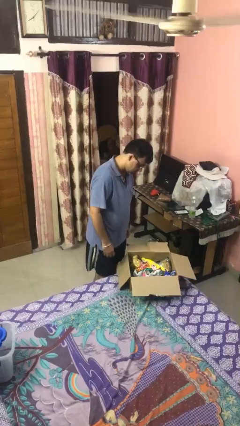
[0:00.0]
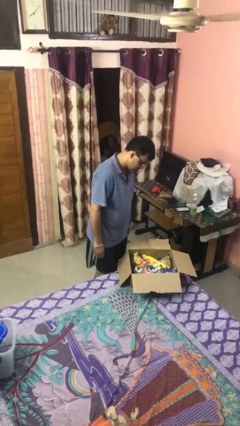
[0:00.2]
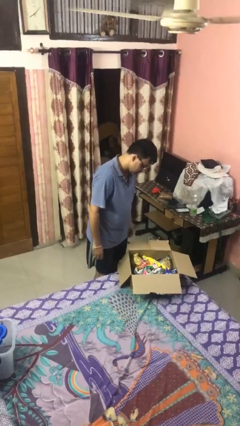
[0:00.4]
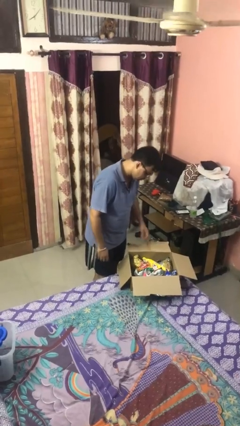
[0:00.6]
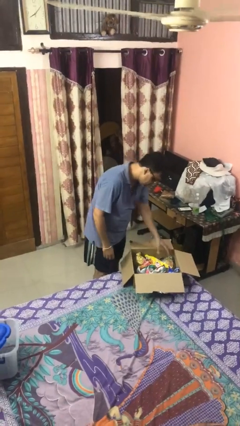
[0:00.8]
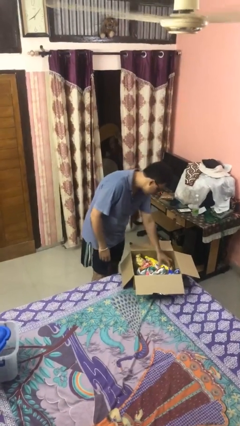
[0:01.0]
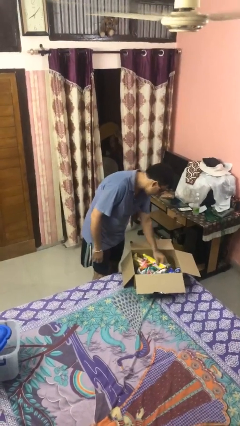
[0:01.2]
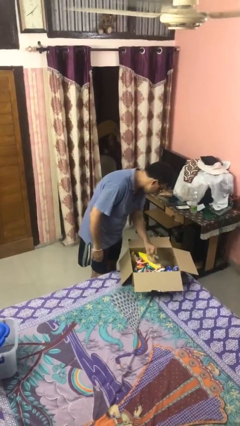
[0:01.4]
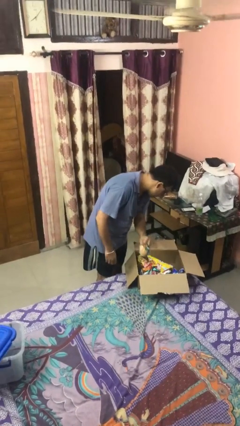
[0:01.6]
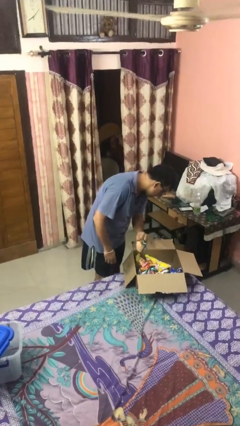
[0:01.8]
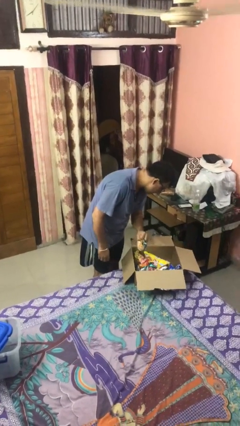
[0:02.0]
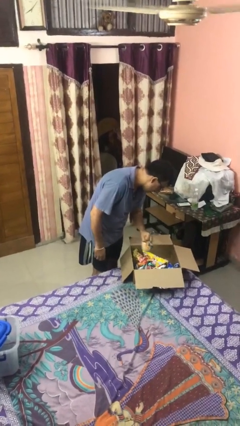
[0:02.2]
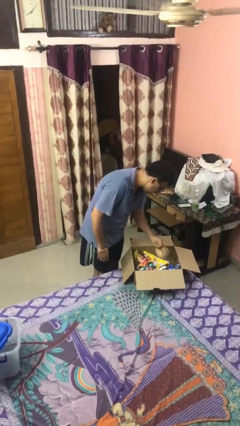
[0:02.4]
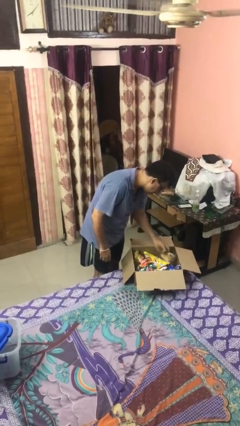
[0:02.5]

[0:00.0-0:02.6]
person searches in box

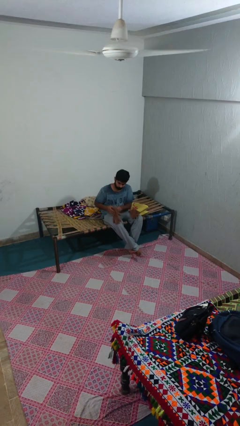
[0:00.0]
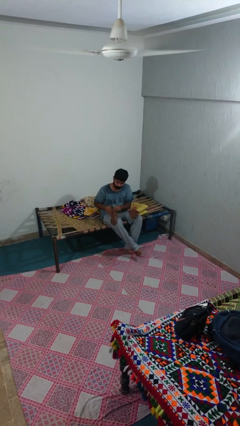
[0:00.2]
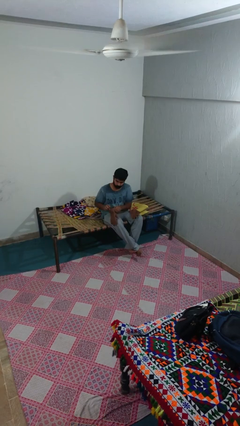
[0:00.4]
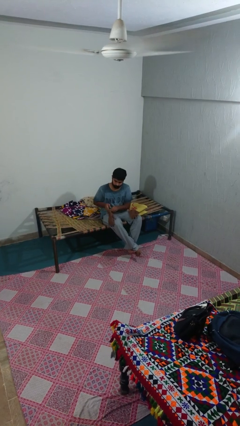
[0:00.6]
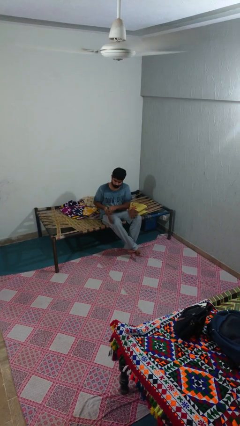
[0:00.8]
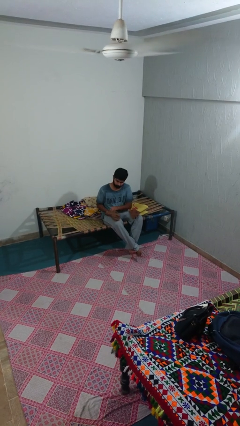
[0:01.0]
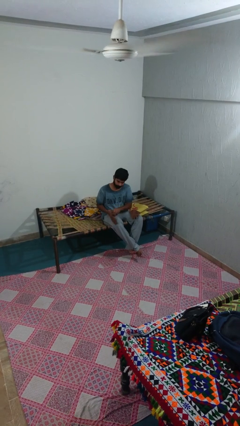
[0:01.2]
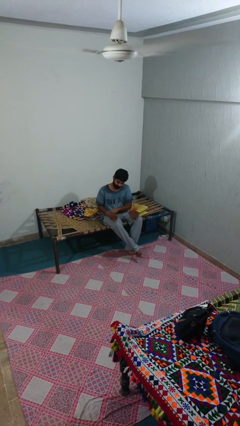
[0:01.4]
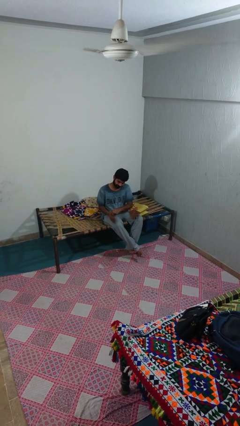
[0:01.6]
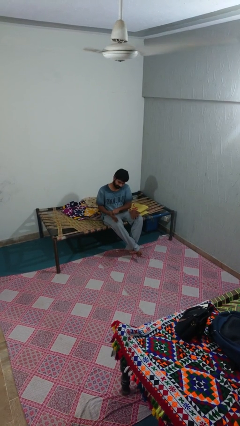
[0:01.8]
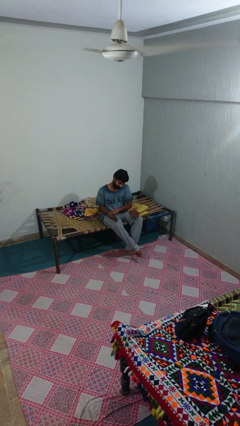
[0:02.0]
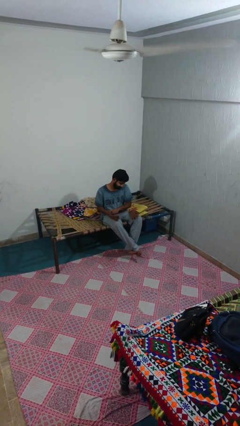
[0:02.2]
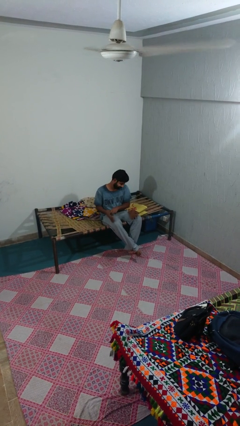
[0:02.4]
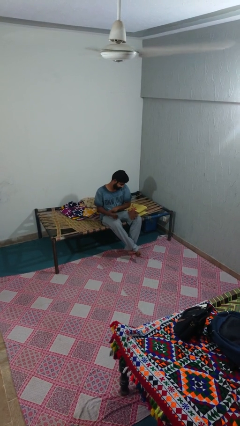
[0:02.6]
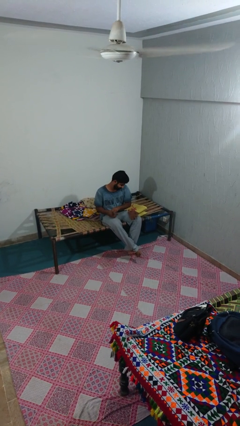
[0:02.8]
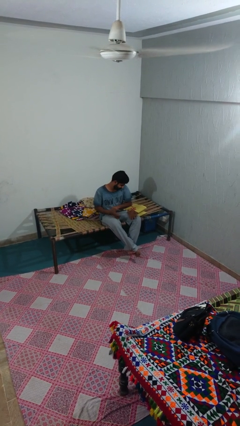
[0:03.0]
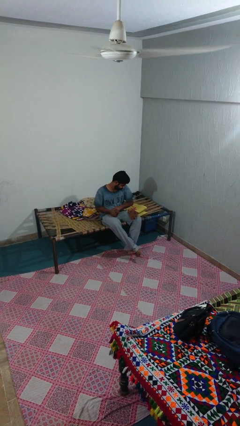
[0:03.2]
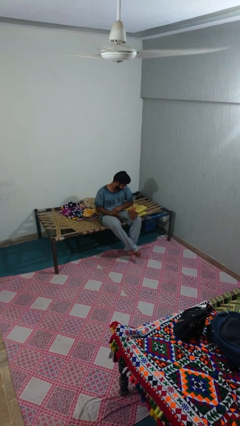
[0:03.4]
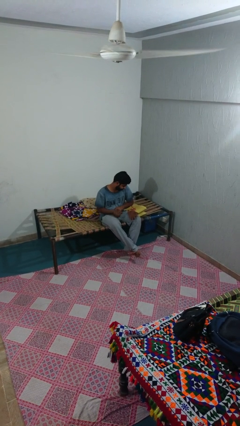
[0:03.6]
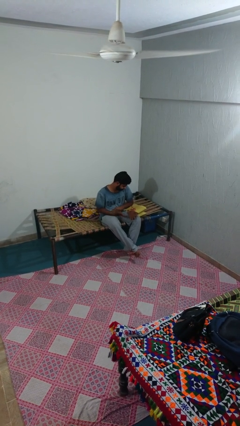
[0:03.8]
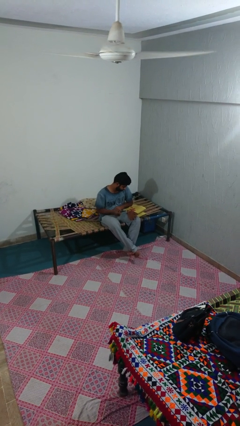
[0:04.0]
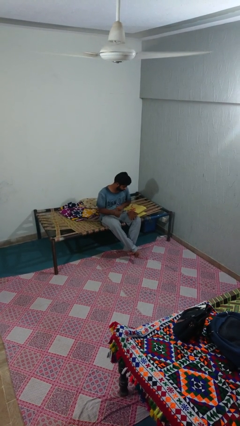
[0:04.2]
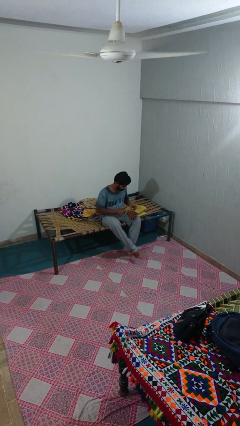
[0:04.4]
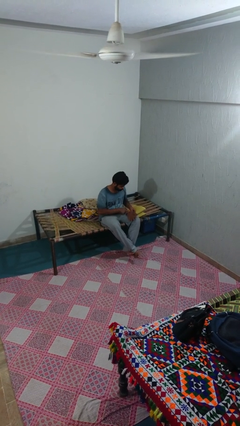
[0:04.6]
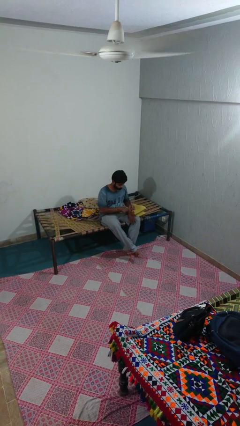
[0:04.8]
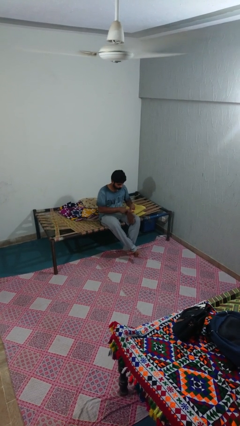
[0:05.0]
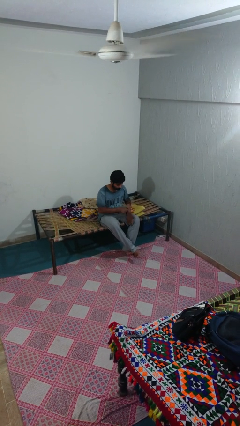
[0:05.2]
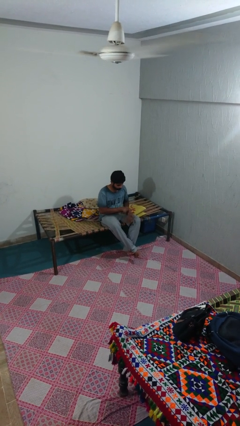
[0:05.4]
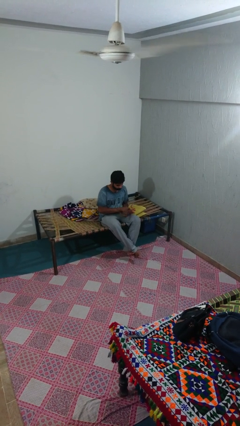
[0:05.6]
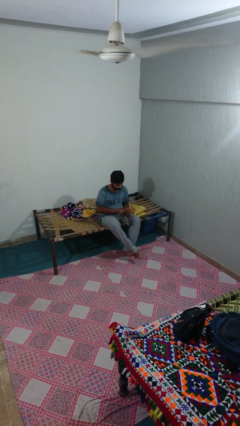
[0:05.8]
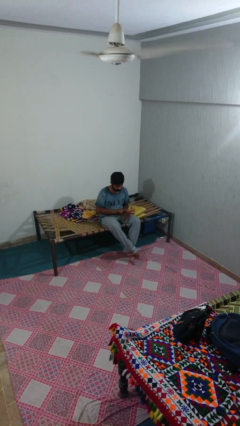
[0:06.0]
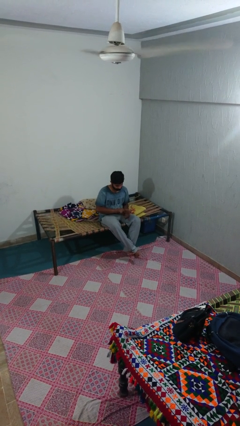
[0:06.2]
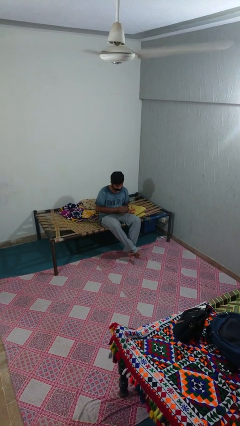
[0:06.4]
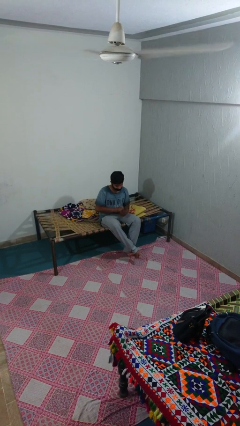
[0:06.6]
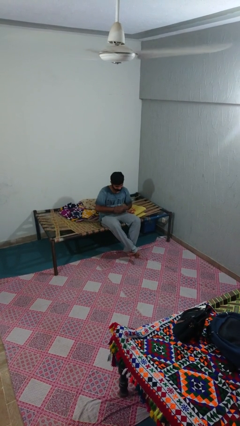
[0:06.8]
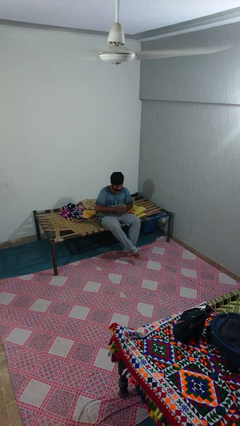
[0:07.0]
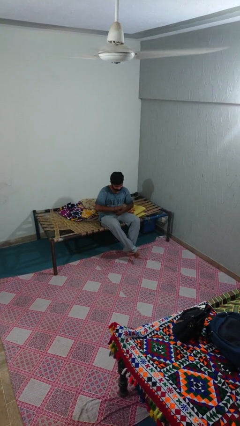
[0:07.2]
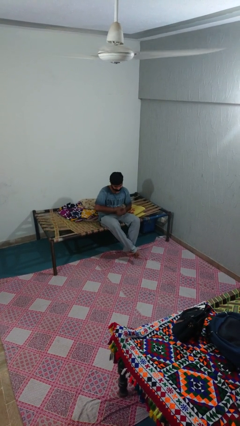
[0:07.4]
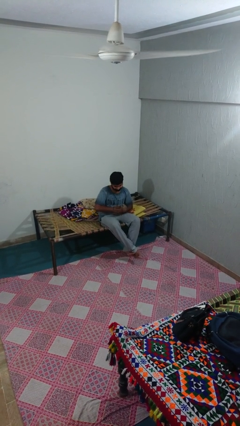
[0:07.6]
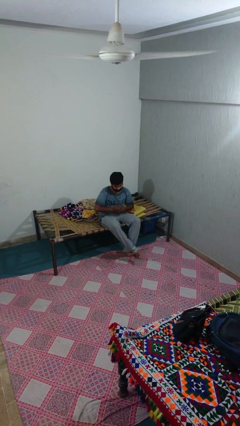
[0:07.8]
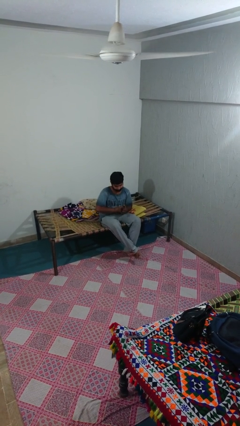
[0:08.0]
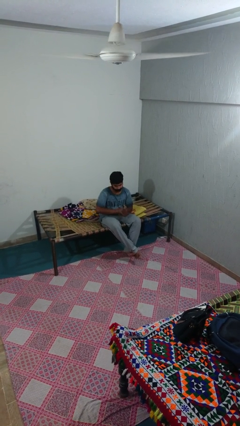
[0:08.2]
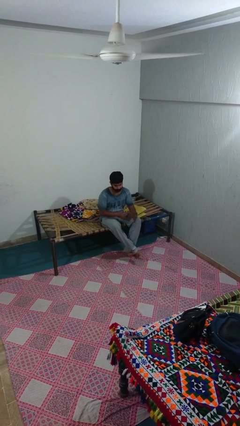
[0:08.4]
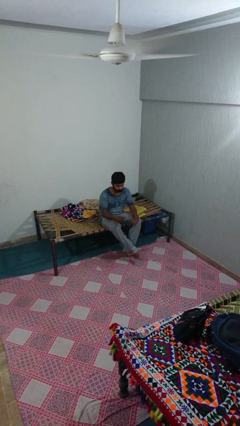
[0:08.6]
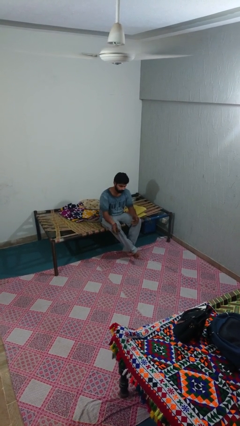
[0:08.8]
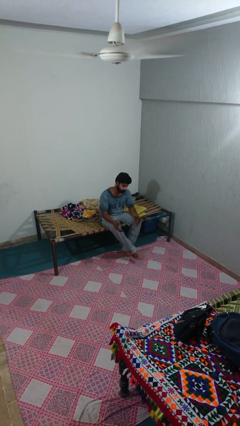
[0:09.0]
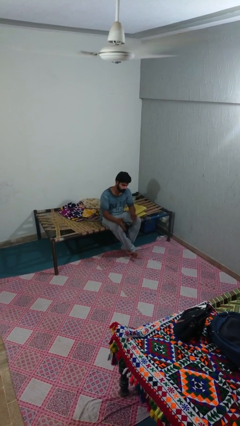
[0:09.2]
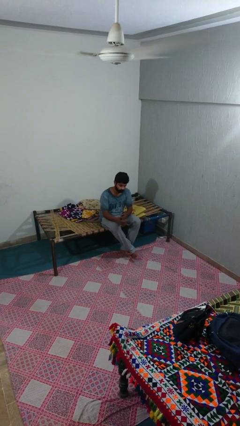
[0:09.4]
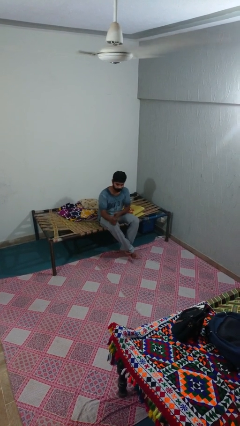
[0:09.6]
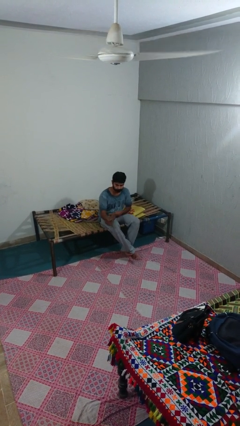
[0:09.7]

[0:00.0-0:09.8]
person puts on gloves

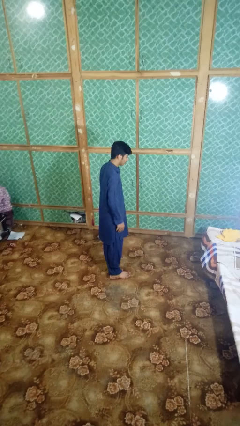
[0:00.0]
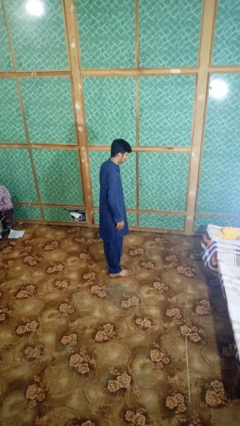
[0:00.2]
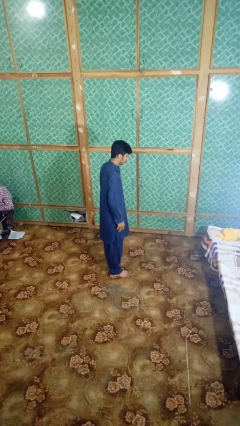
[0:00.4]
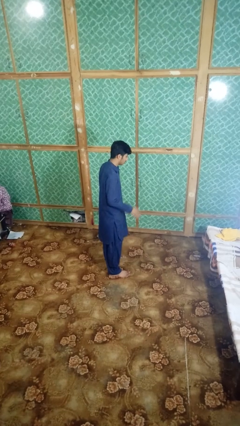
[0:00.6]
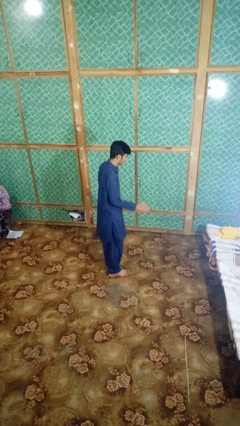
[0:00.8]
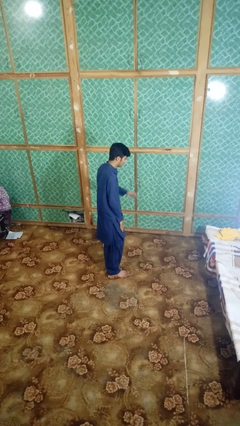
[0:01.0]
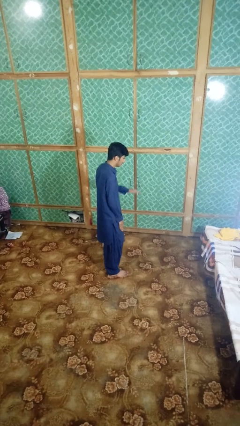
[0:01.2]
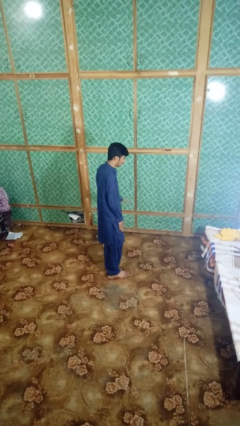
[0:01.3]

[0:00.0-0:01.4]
person slaps hands on thighs

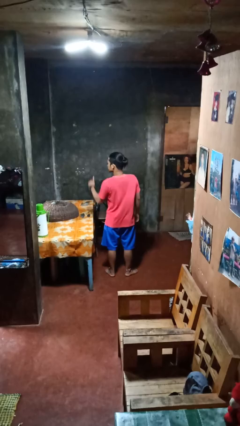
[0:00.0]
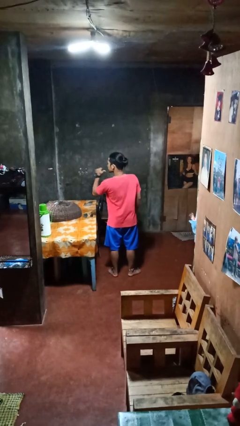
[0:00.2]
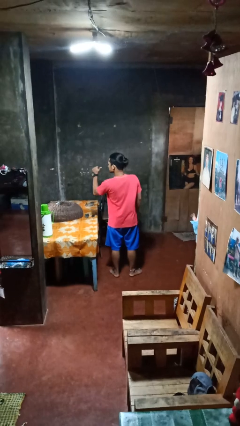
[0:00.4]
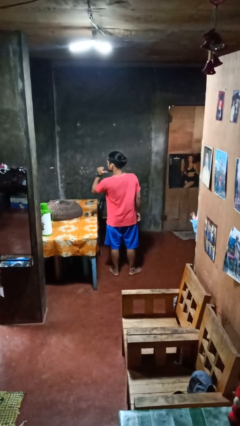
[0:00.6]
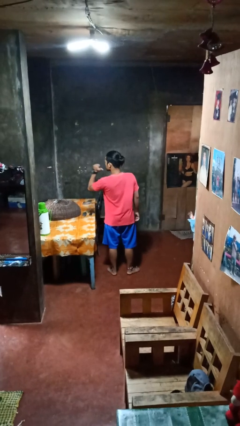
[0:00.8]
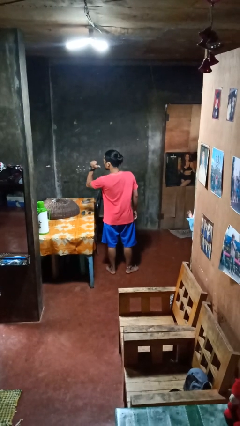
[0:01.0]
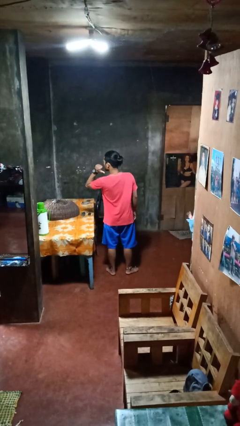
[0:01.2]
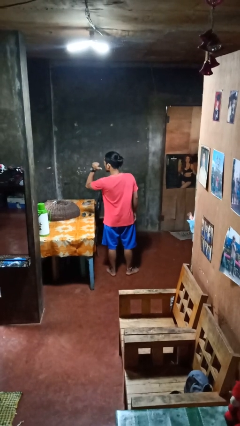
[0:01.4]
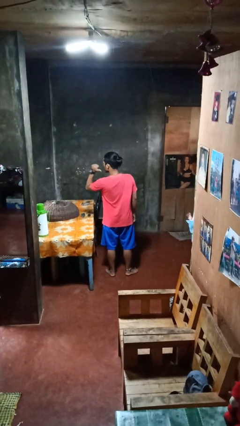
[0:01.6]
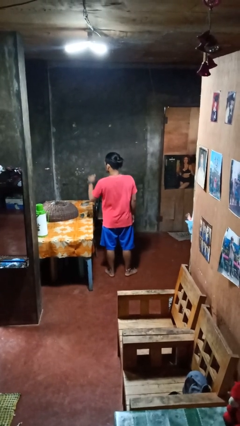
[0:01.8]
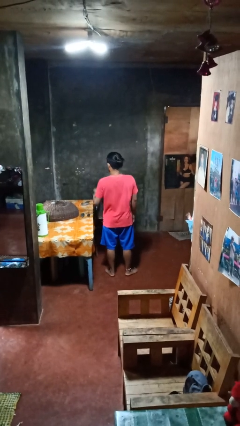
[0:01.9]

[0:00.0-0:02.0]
person gestures behind me

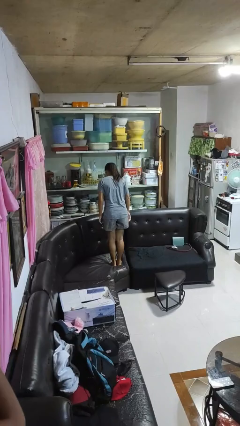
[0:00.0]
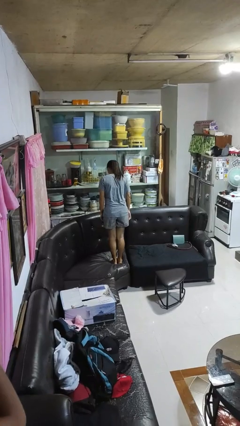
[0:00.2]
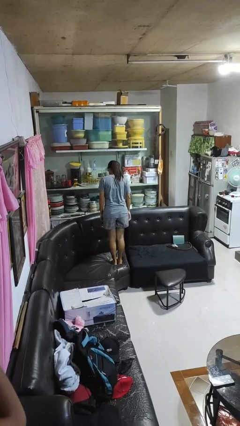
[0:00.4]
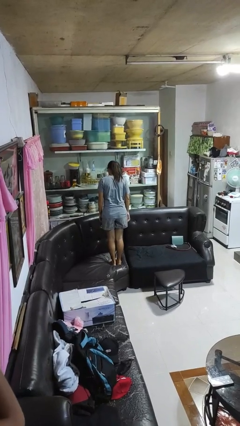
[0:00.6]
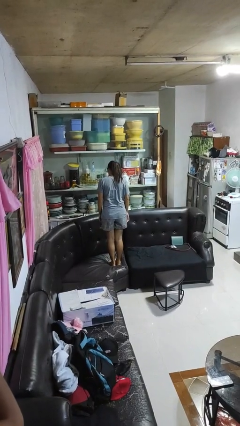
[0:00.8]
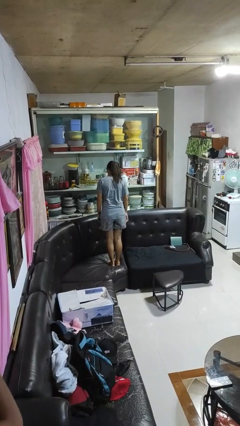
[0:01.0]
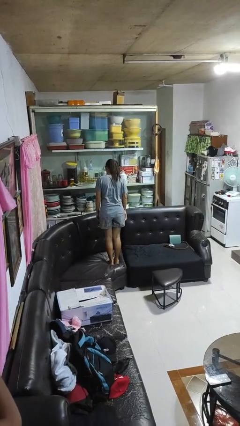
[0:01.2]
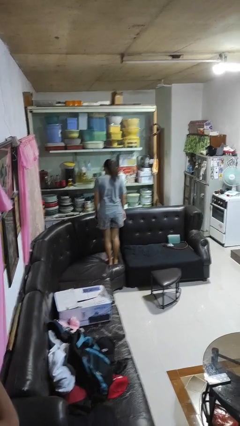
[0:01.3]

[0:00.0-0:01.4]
person jumps on couch

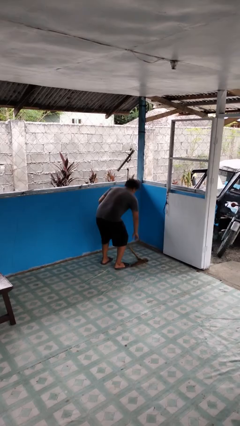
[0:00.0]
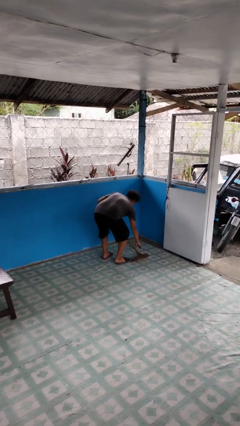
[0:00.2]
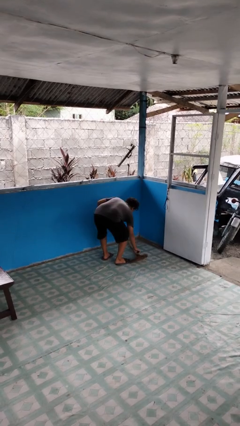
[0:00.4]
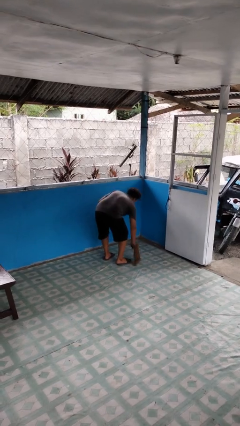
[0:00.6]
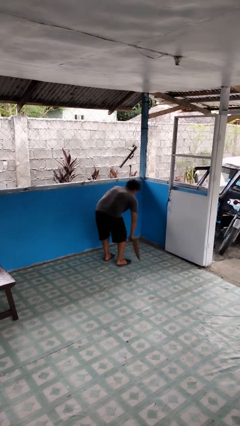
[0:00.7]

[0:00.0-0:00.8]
person picks up object from floor
